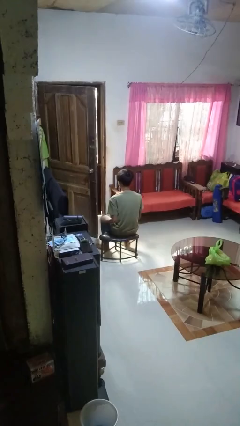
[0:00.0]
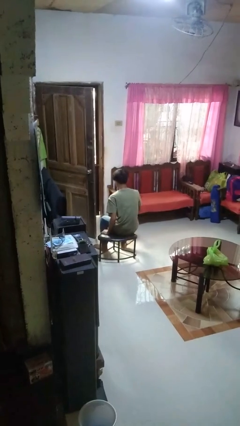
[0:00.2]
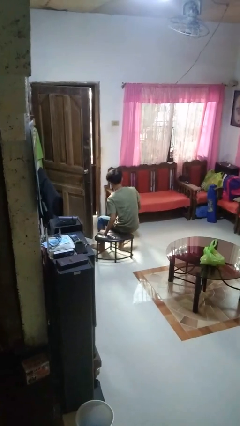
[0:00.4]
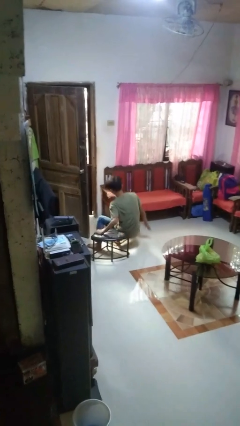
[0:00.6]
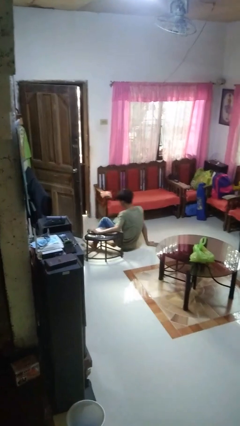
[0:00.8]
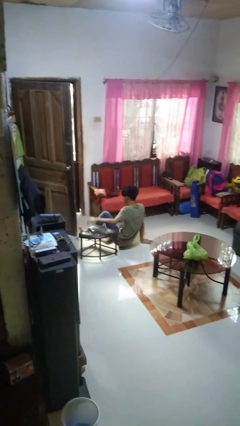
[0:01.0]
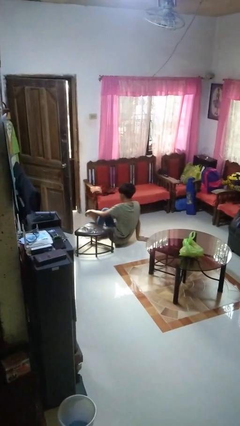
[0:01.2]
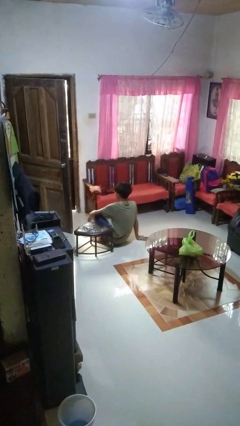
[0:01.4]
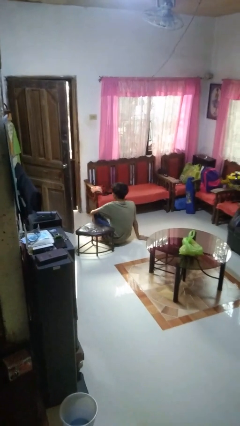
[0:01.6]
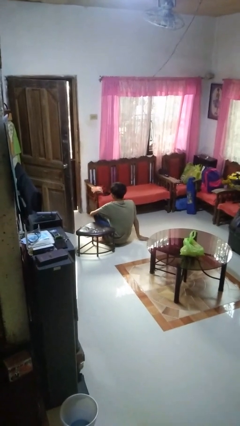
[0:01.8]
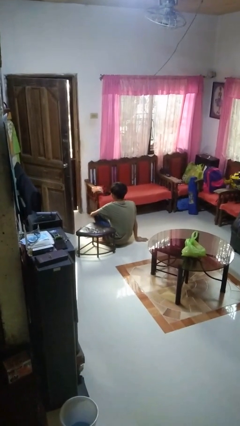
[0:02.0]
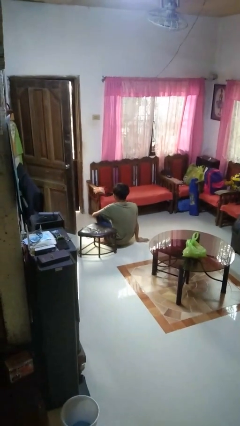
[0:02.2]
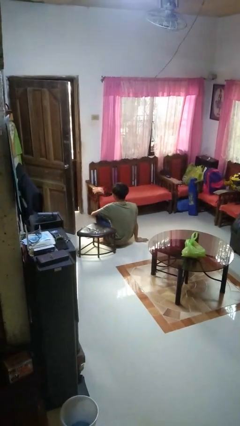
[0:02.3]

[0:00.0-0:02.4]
person falls from chair

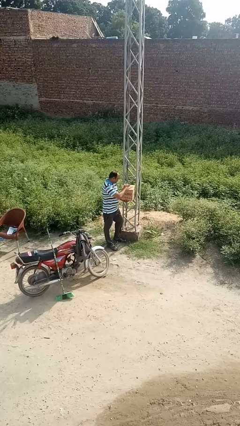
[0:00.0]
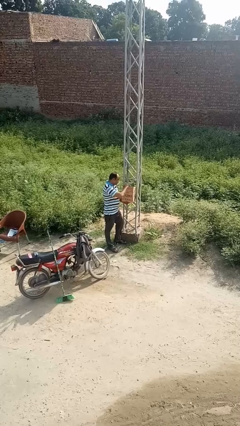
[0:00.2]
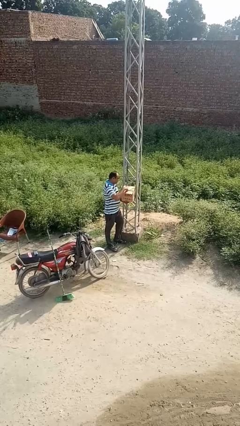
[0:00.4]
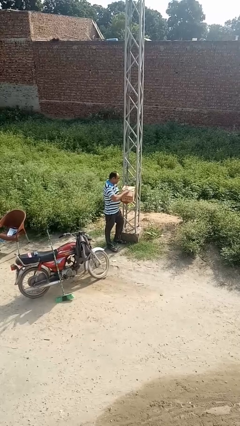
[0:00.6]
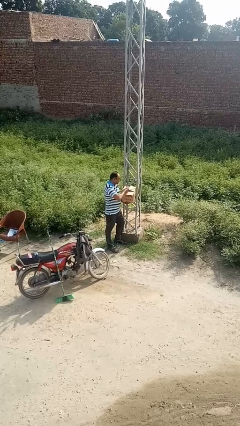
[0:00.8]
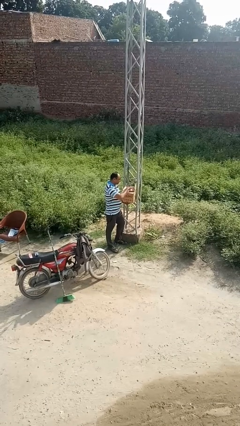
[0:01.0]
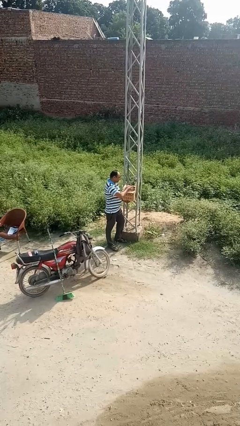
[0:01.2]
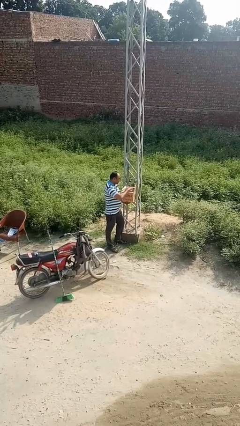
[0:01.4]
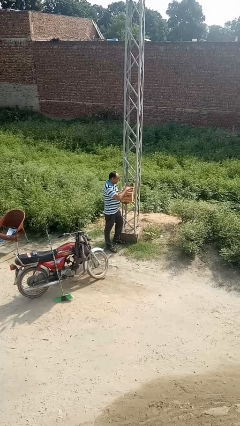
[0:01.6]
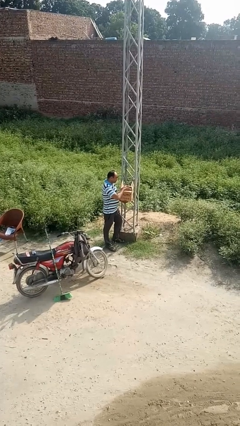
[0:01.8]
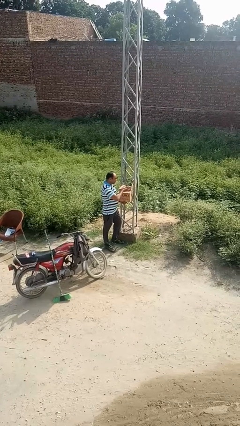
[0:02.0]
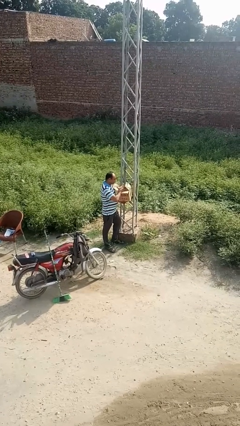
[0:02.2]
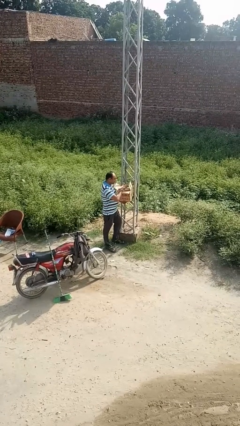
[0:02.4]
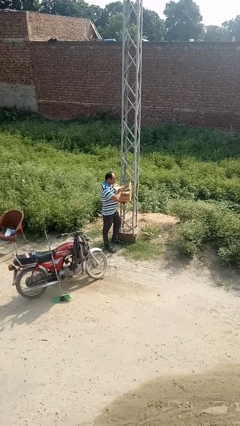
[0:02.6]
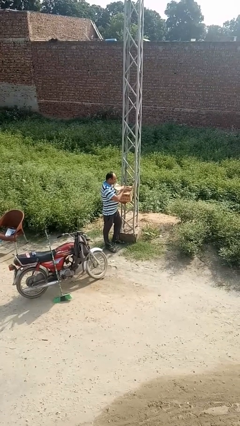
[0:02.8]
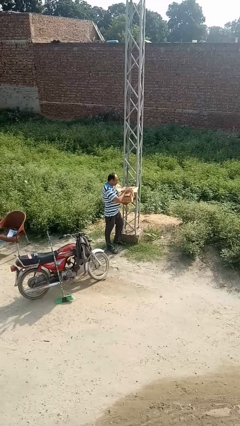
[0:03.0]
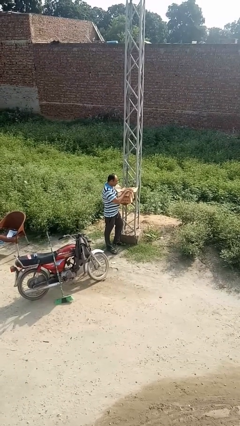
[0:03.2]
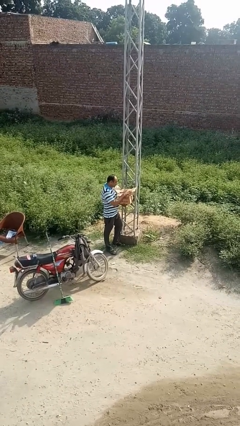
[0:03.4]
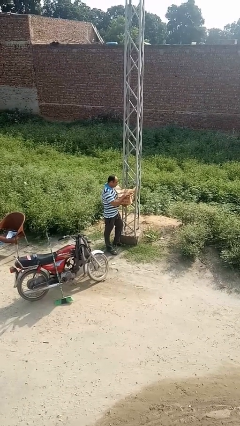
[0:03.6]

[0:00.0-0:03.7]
person opens mailbox

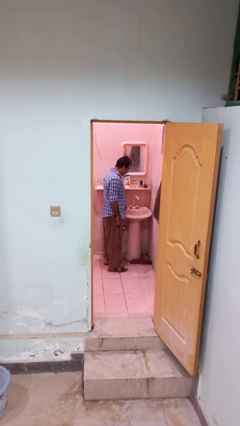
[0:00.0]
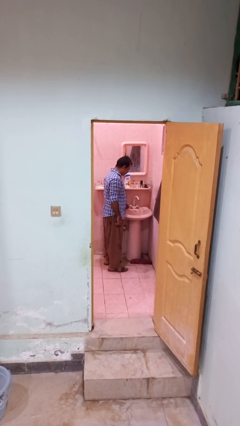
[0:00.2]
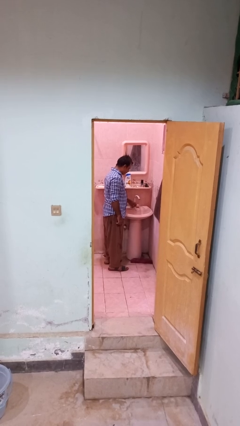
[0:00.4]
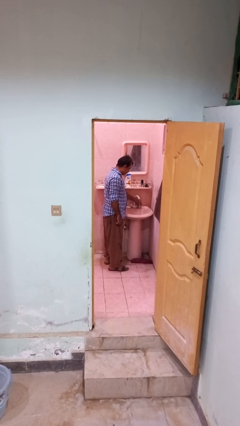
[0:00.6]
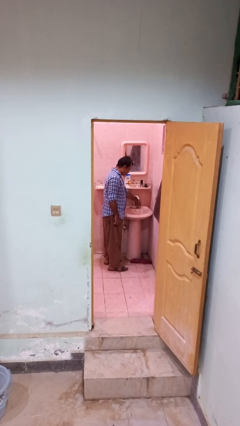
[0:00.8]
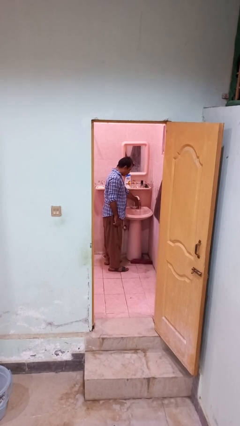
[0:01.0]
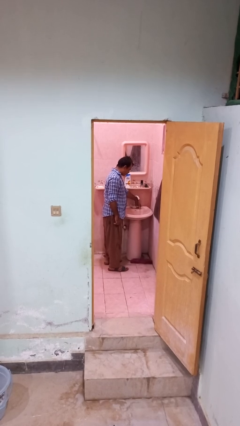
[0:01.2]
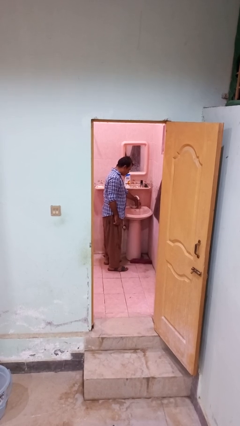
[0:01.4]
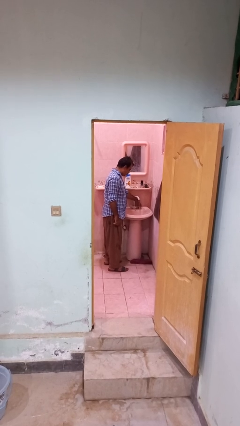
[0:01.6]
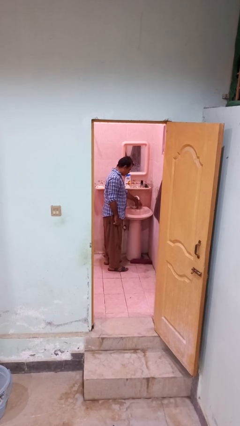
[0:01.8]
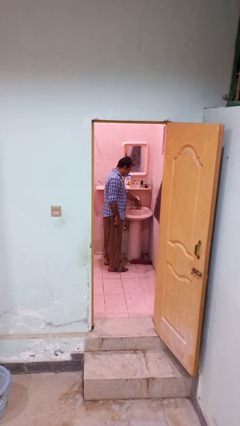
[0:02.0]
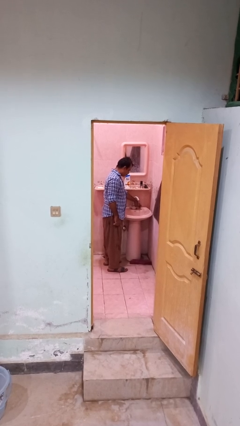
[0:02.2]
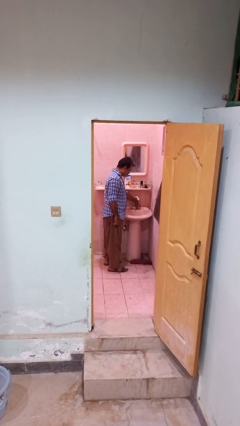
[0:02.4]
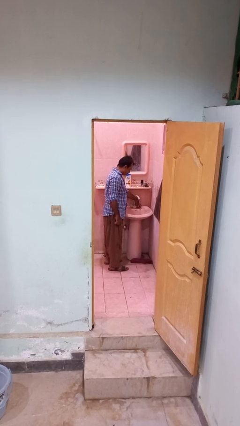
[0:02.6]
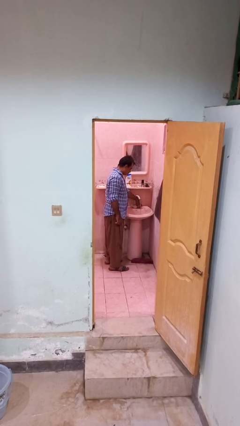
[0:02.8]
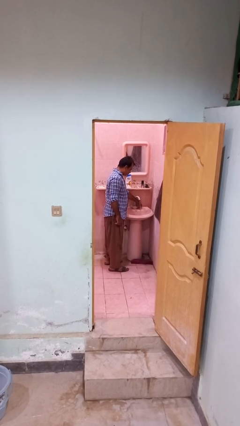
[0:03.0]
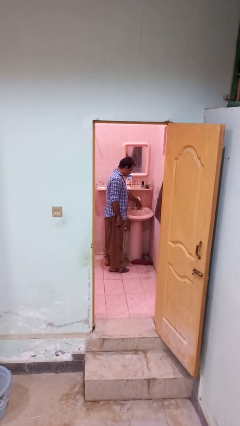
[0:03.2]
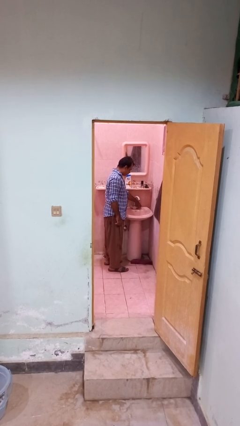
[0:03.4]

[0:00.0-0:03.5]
person closes clothes washer

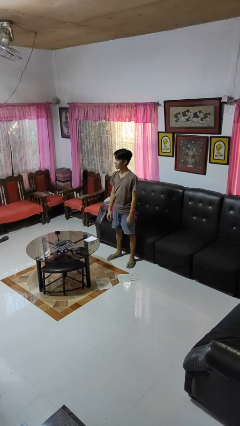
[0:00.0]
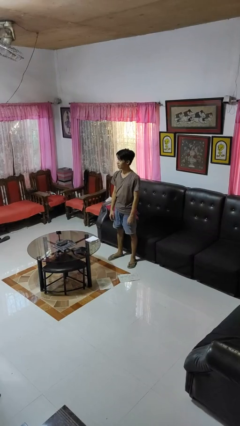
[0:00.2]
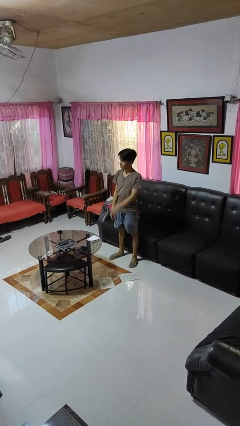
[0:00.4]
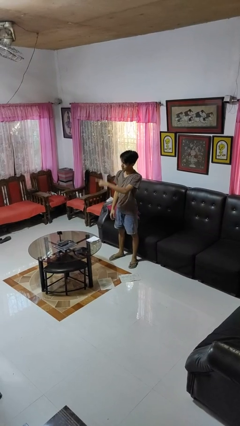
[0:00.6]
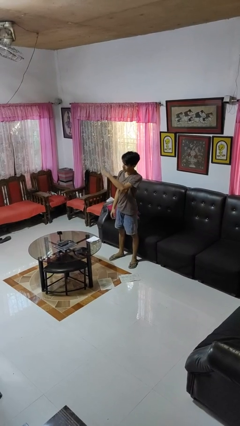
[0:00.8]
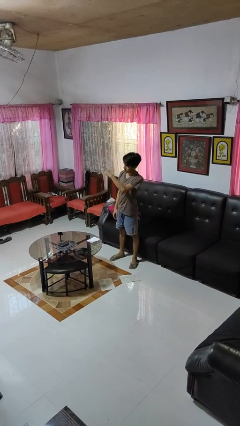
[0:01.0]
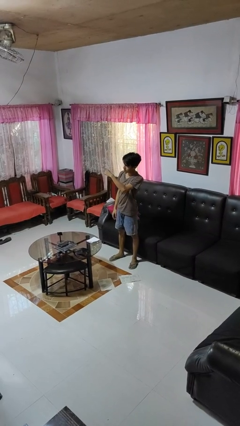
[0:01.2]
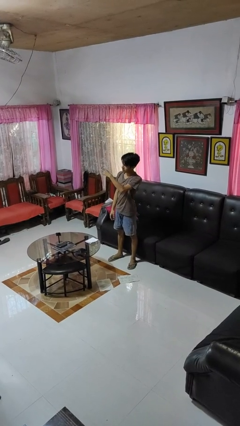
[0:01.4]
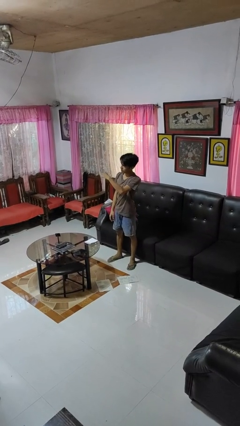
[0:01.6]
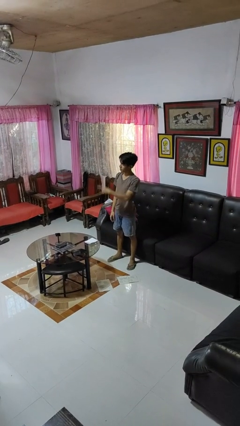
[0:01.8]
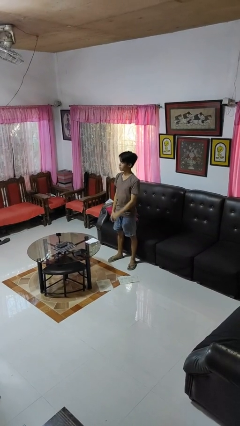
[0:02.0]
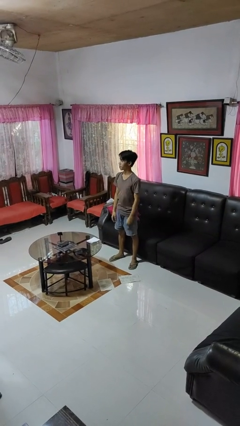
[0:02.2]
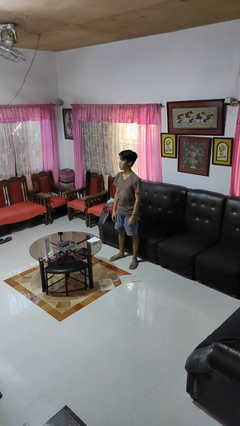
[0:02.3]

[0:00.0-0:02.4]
person points at person

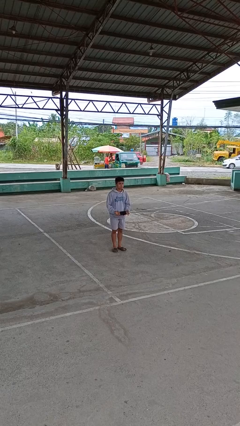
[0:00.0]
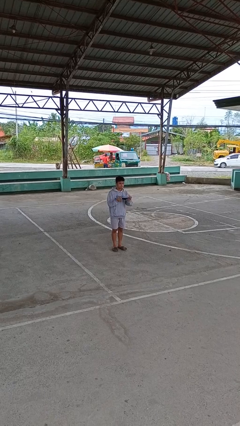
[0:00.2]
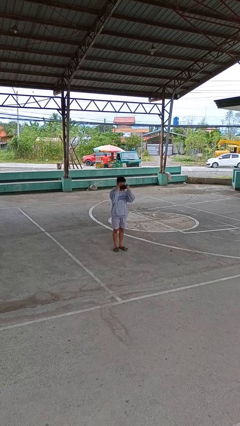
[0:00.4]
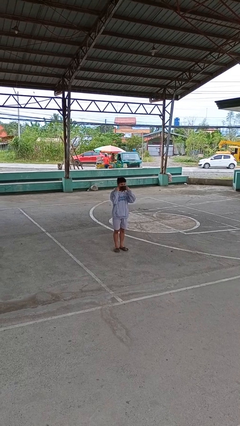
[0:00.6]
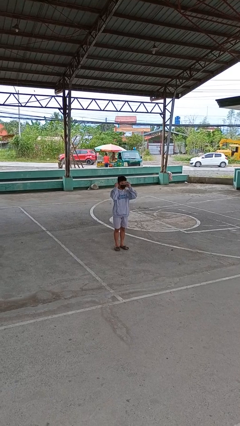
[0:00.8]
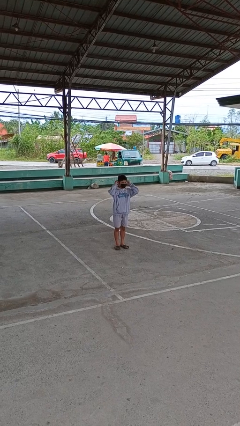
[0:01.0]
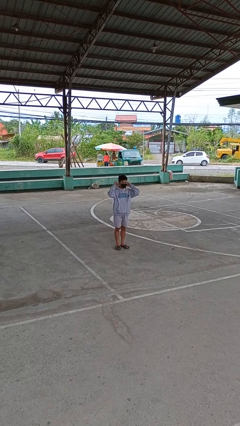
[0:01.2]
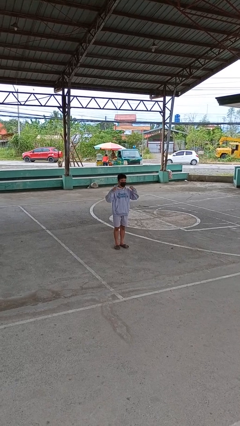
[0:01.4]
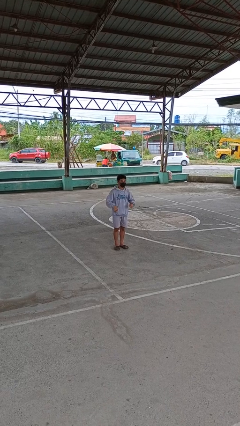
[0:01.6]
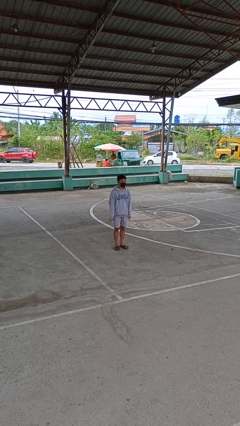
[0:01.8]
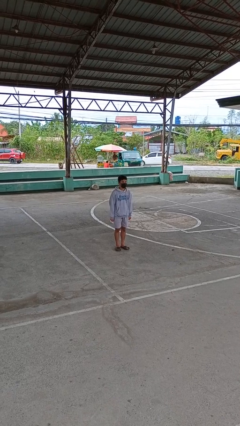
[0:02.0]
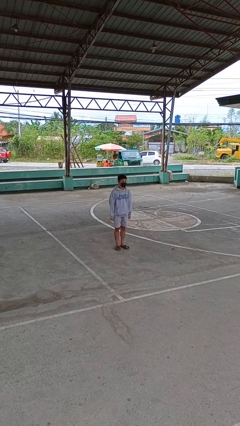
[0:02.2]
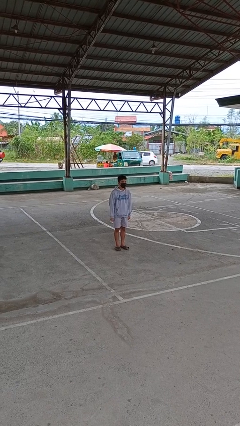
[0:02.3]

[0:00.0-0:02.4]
person puts on facemask

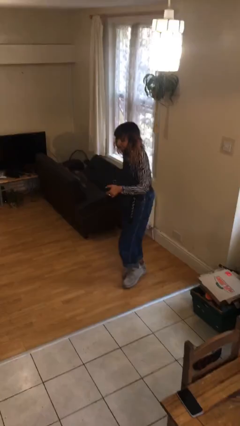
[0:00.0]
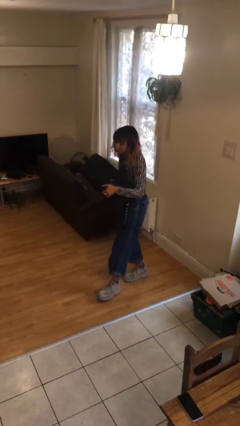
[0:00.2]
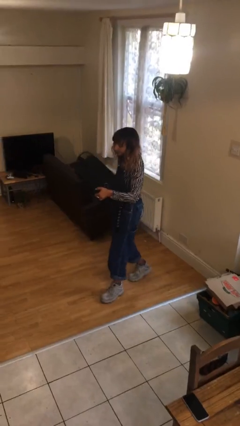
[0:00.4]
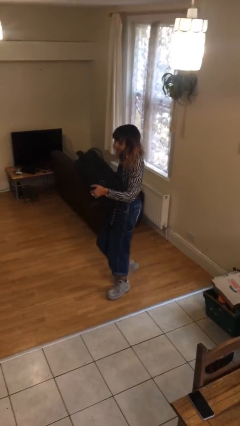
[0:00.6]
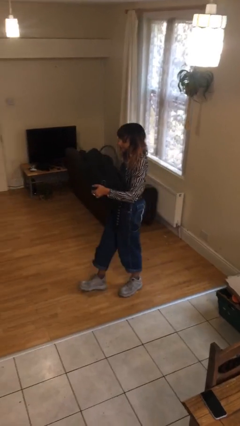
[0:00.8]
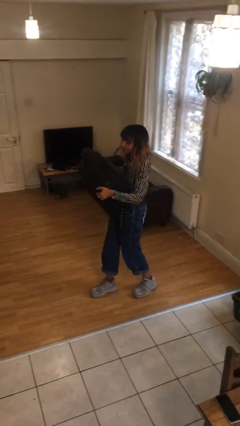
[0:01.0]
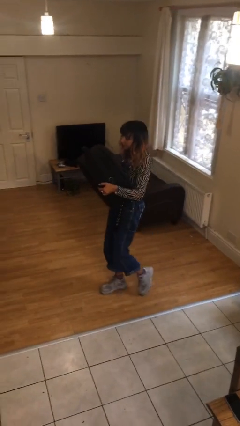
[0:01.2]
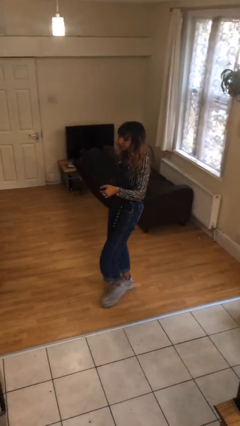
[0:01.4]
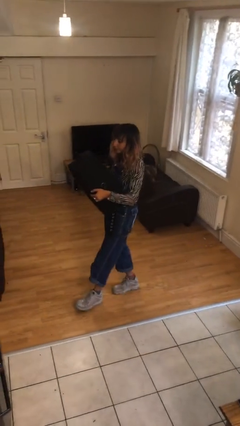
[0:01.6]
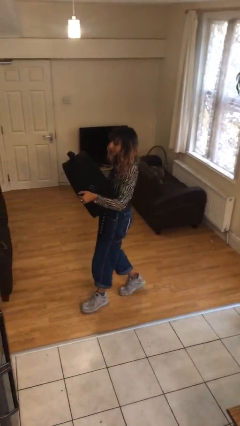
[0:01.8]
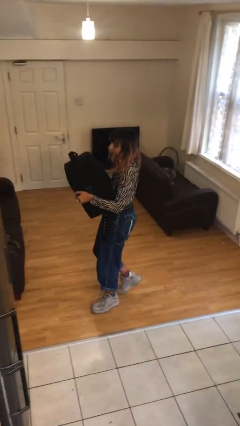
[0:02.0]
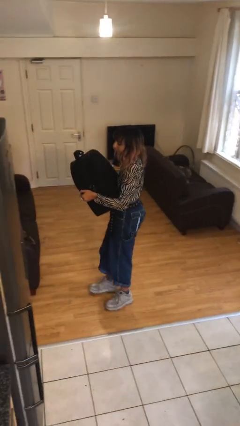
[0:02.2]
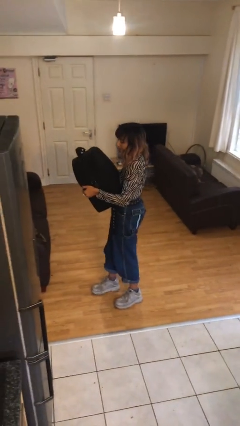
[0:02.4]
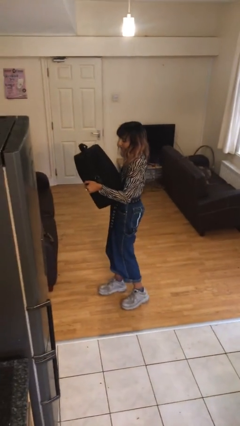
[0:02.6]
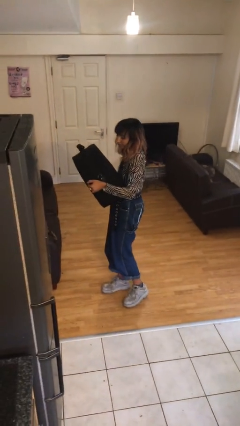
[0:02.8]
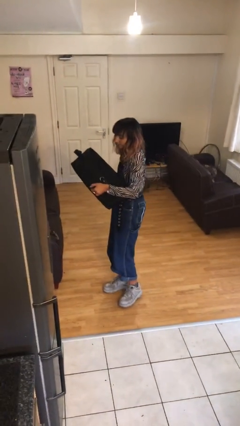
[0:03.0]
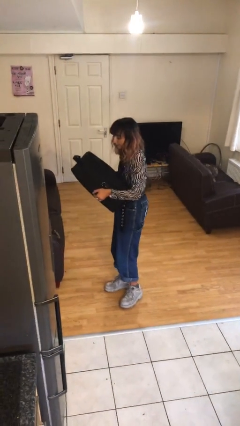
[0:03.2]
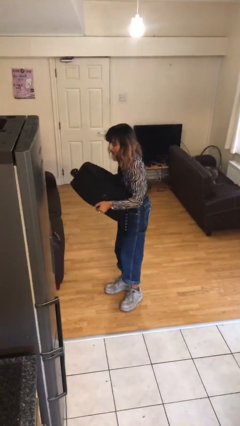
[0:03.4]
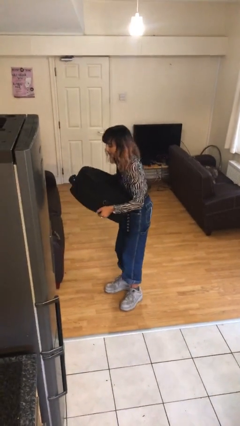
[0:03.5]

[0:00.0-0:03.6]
person carries heavy object
